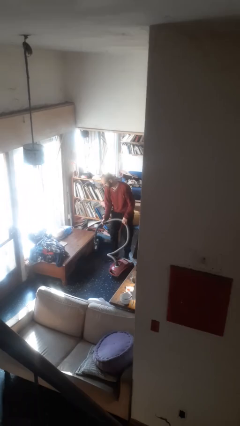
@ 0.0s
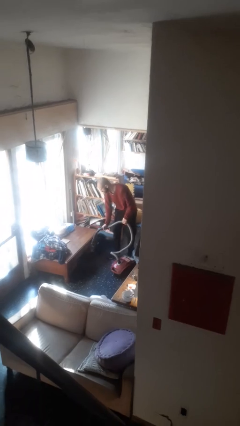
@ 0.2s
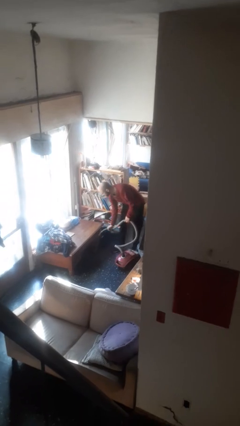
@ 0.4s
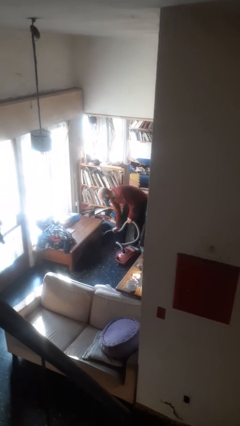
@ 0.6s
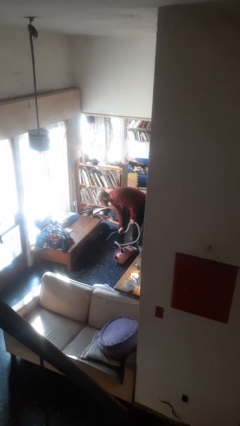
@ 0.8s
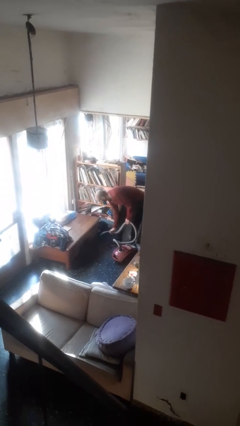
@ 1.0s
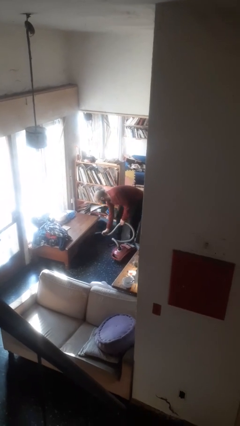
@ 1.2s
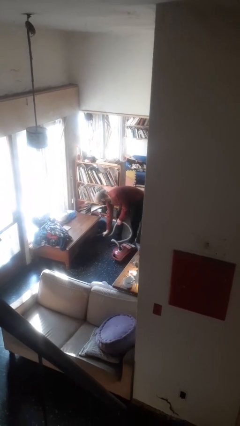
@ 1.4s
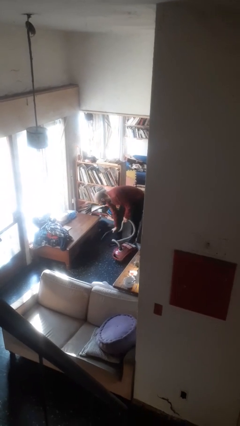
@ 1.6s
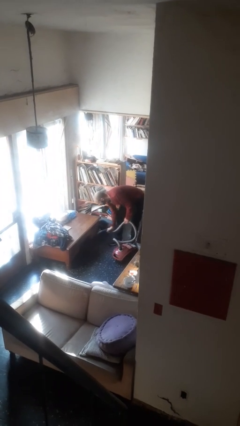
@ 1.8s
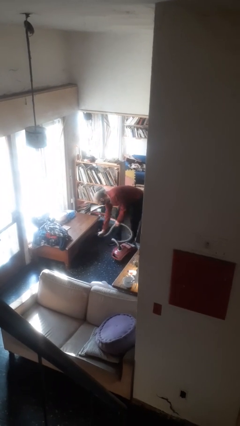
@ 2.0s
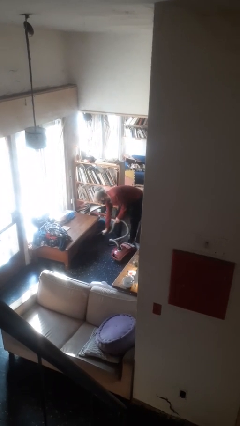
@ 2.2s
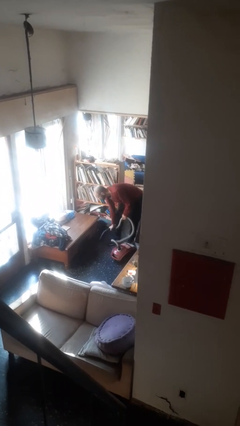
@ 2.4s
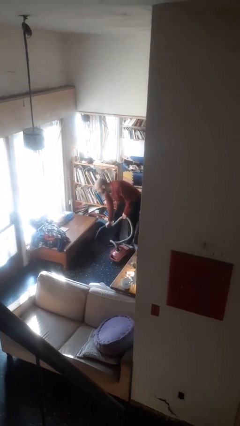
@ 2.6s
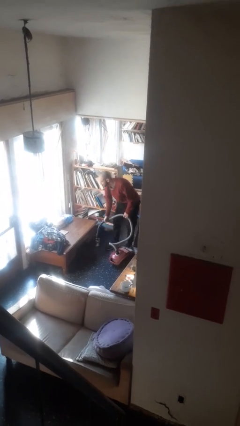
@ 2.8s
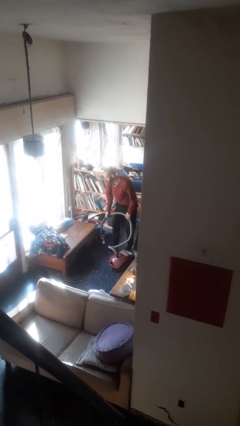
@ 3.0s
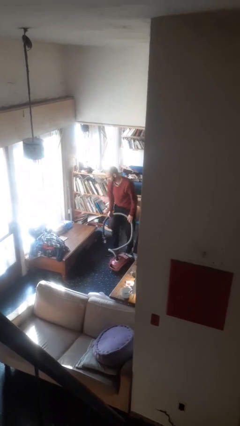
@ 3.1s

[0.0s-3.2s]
person vacuums carpet

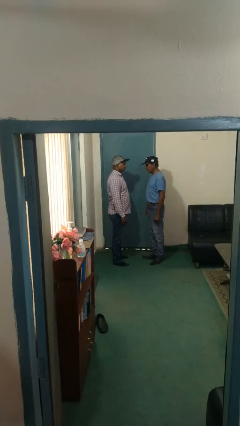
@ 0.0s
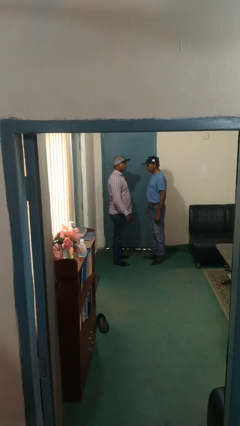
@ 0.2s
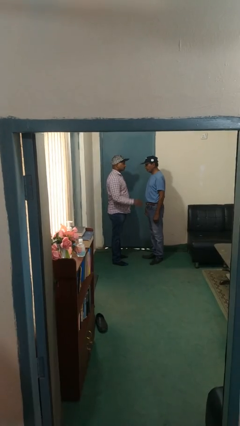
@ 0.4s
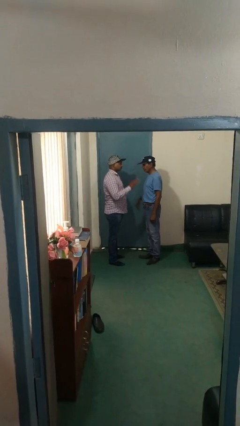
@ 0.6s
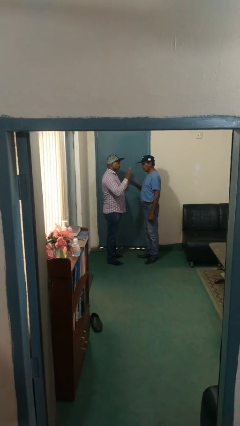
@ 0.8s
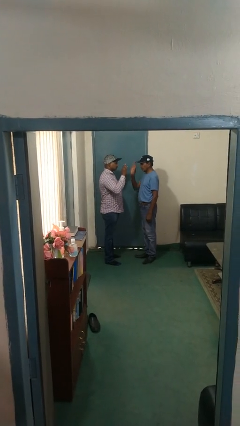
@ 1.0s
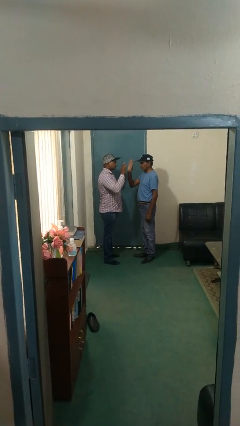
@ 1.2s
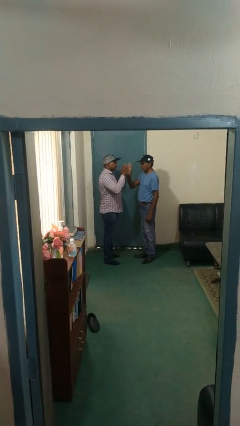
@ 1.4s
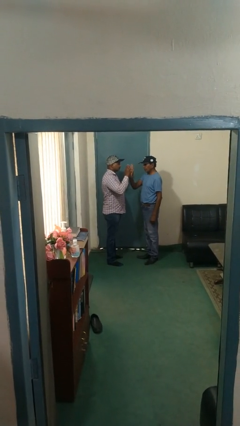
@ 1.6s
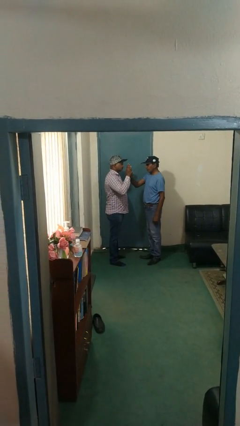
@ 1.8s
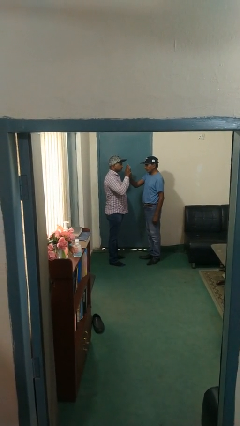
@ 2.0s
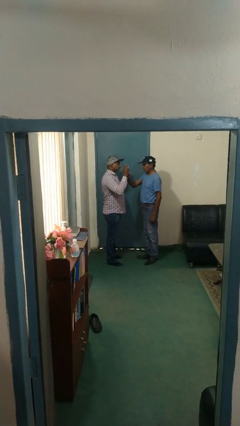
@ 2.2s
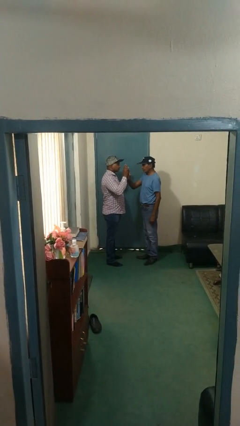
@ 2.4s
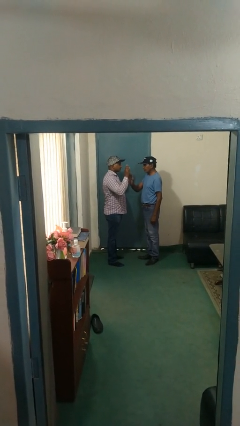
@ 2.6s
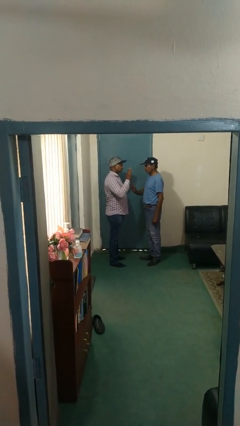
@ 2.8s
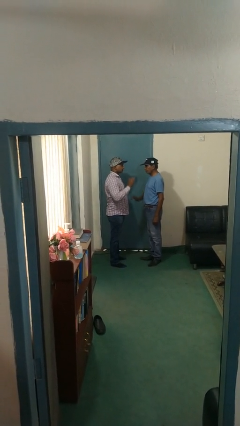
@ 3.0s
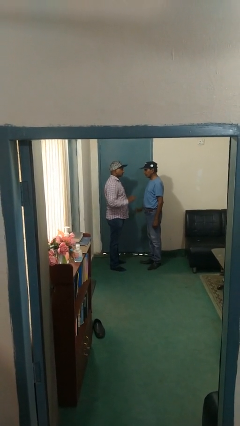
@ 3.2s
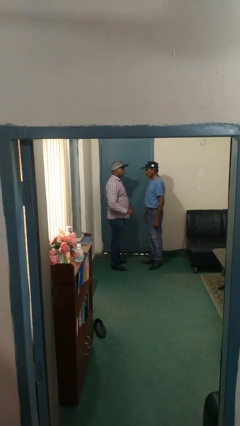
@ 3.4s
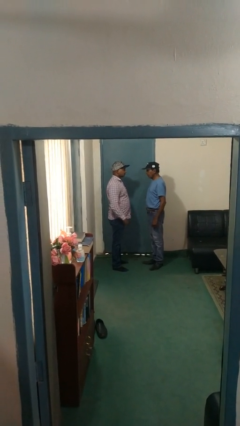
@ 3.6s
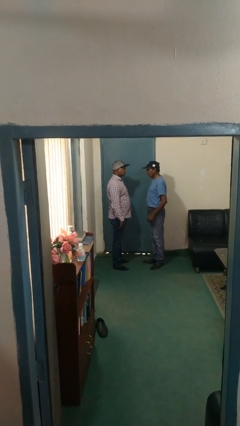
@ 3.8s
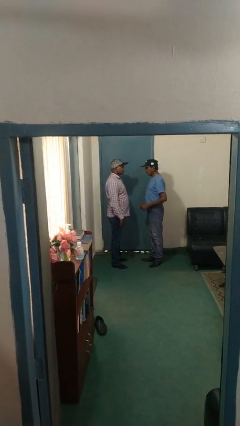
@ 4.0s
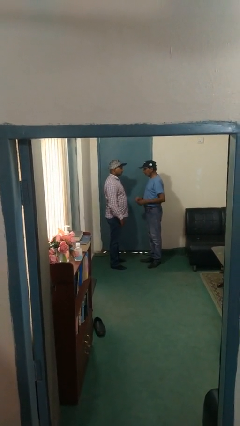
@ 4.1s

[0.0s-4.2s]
person highfives hand

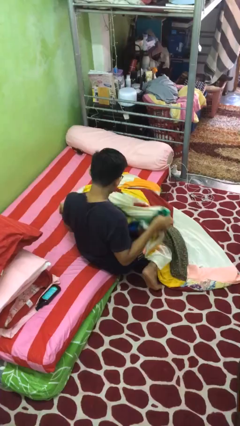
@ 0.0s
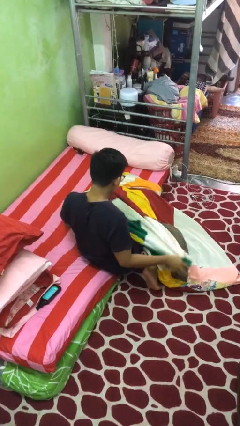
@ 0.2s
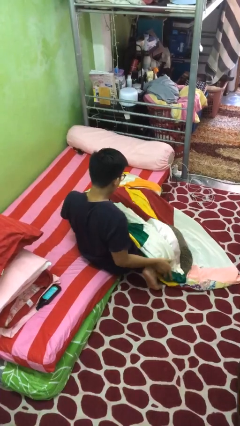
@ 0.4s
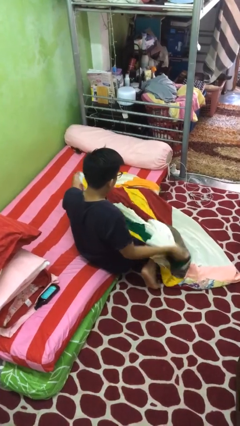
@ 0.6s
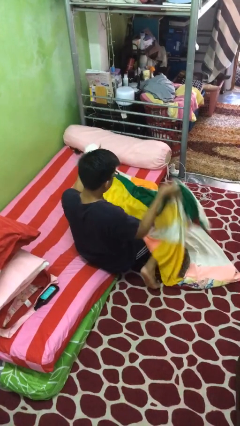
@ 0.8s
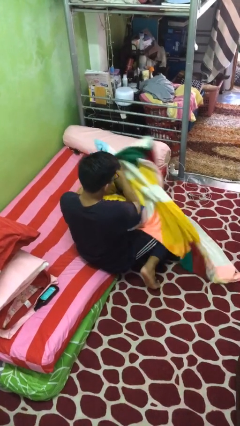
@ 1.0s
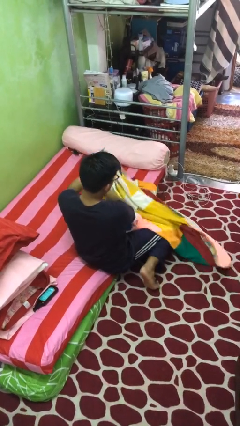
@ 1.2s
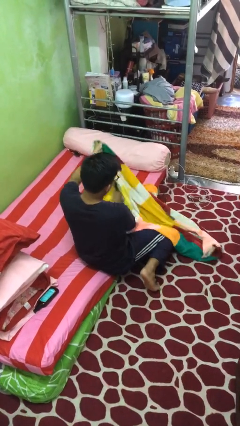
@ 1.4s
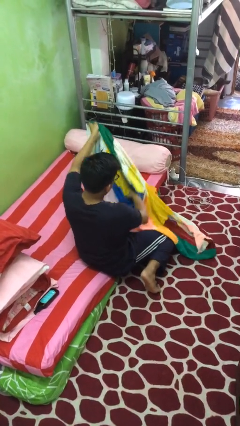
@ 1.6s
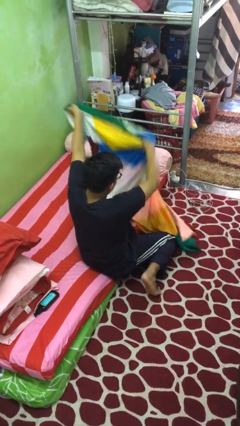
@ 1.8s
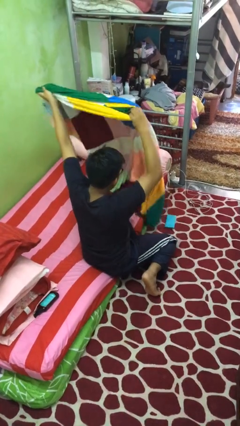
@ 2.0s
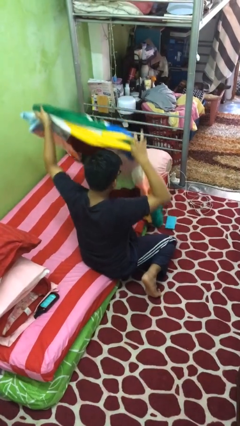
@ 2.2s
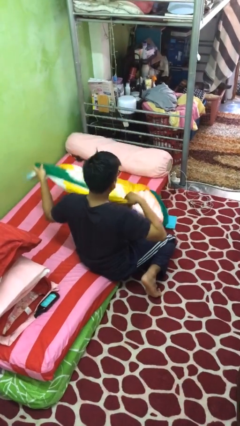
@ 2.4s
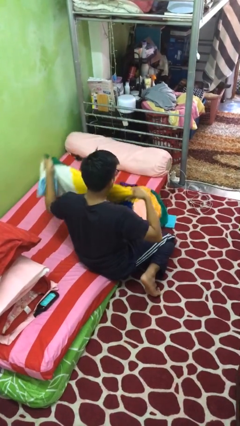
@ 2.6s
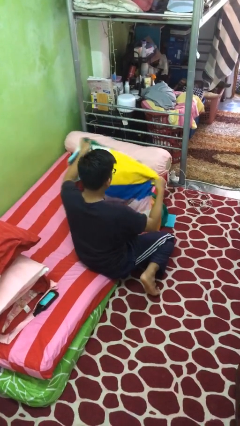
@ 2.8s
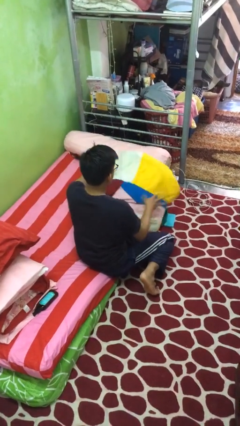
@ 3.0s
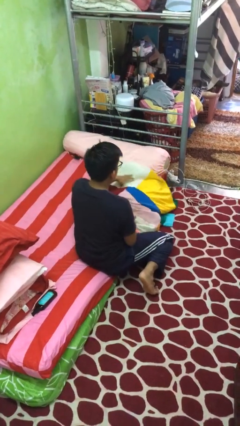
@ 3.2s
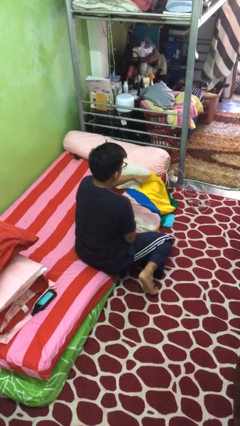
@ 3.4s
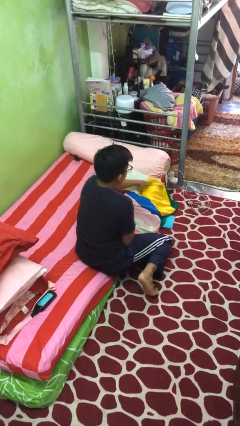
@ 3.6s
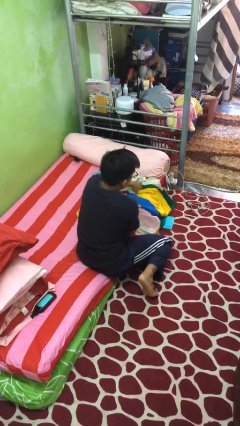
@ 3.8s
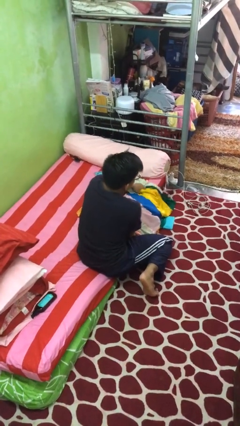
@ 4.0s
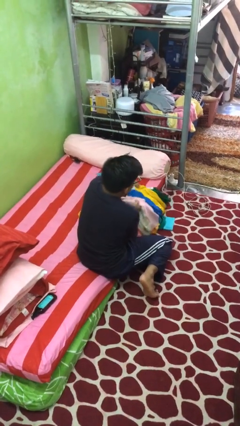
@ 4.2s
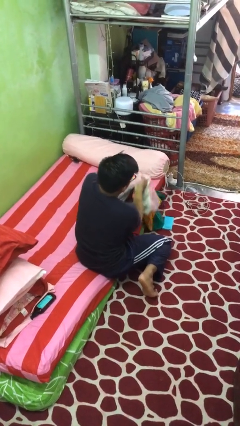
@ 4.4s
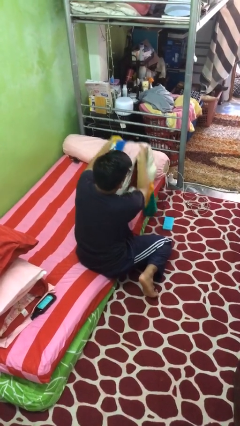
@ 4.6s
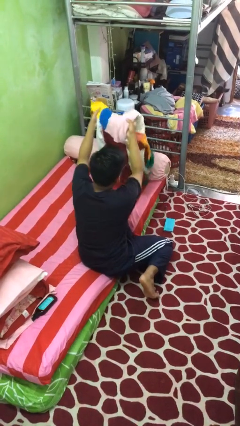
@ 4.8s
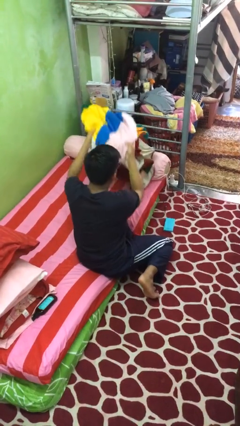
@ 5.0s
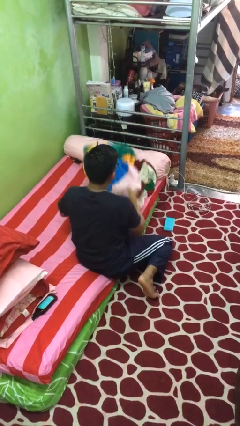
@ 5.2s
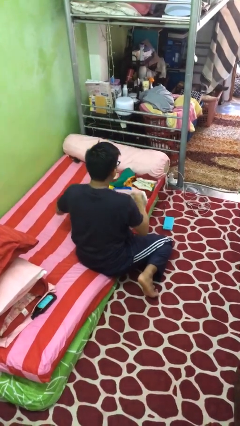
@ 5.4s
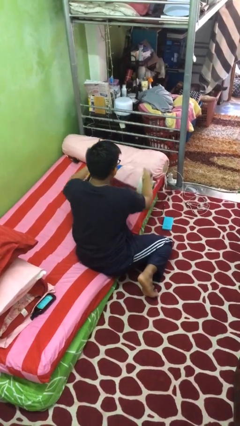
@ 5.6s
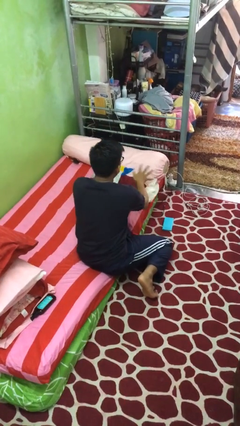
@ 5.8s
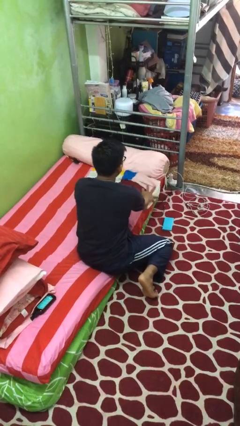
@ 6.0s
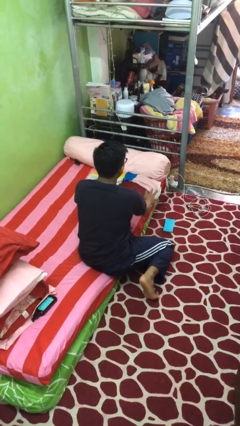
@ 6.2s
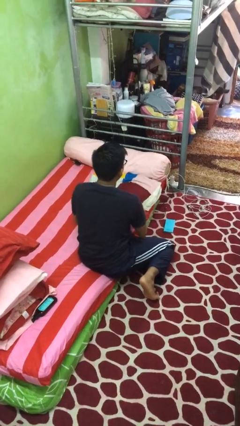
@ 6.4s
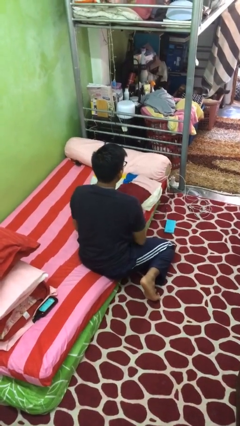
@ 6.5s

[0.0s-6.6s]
person folds blanket

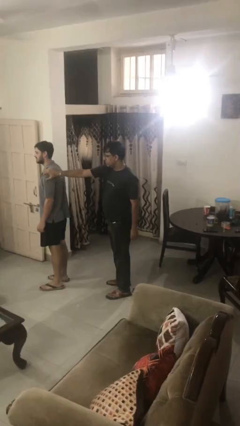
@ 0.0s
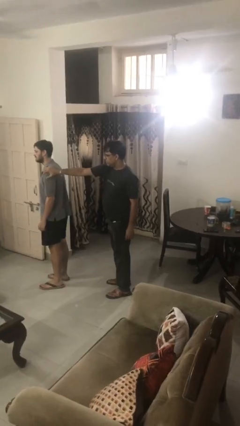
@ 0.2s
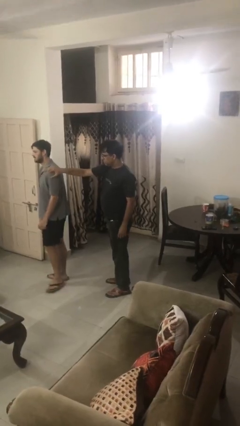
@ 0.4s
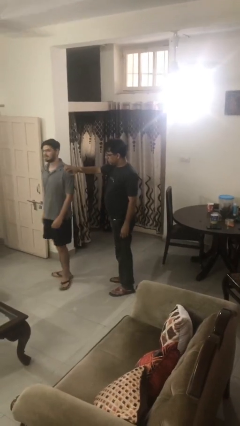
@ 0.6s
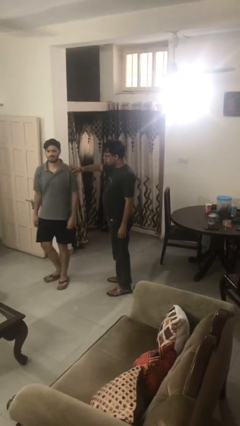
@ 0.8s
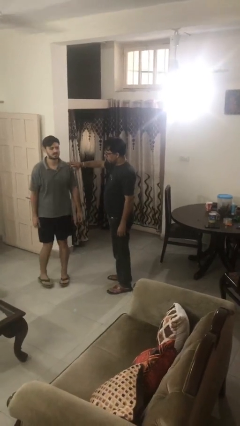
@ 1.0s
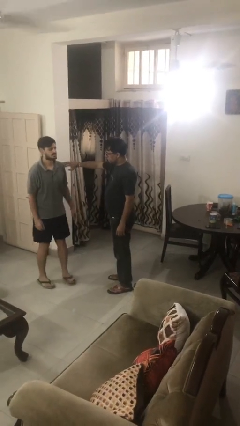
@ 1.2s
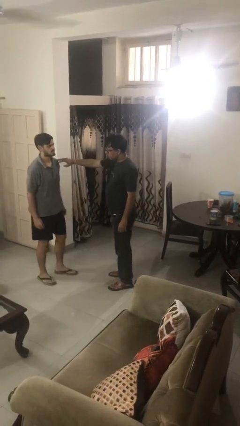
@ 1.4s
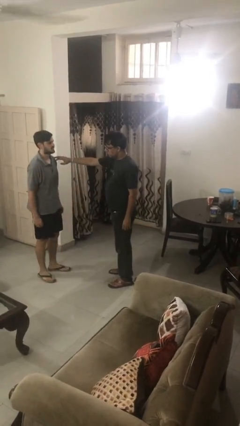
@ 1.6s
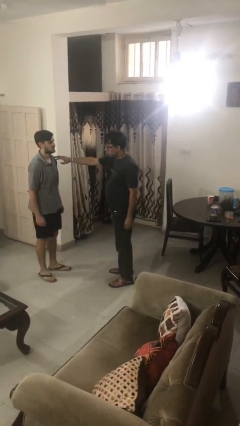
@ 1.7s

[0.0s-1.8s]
person spins person around

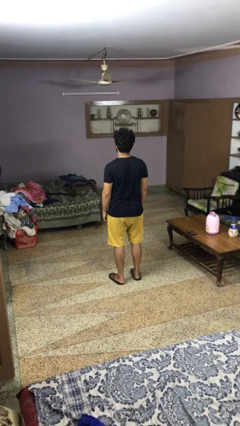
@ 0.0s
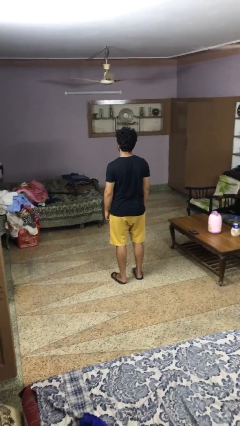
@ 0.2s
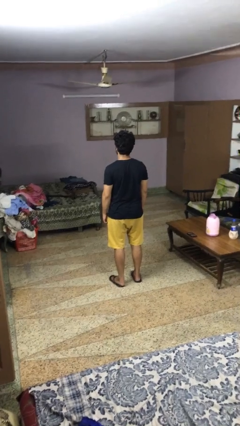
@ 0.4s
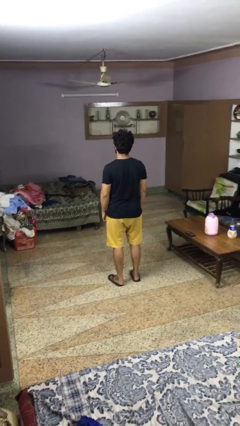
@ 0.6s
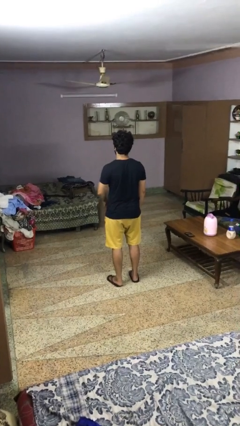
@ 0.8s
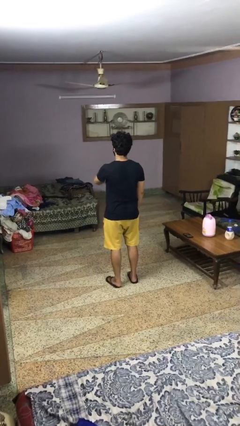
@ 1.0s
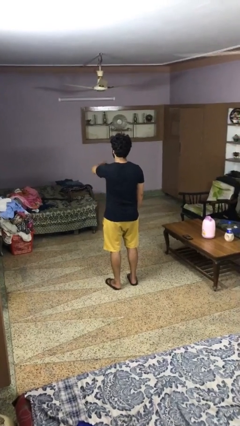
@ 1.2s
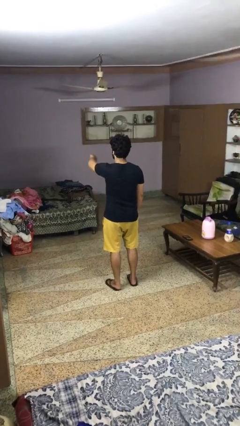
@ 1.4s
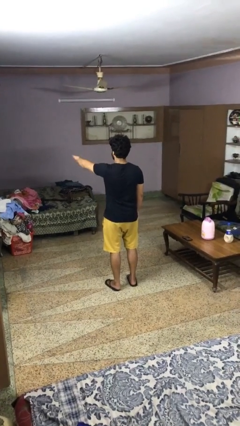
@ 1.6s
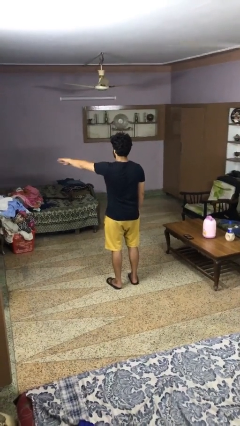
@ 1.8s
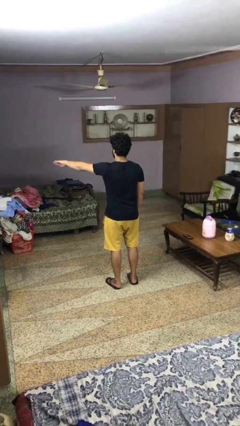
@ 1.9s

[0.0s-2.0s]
person gestures swipe left
